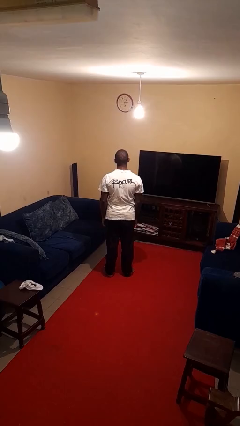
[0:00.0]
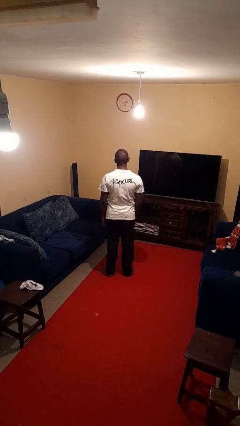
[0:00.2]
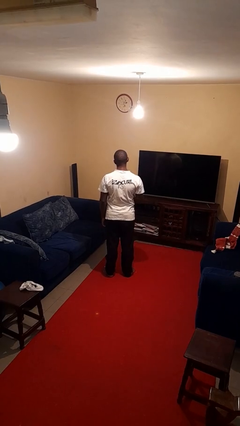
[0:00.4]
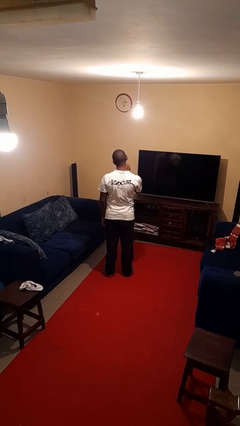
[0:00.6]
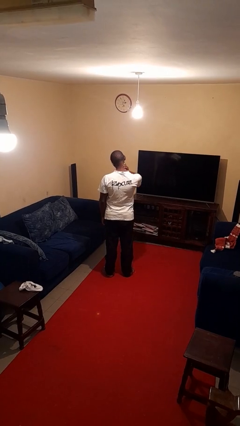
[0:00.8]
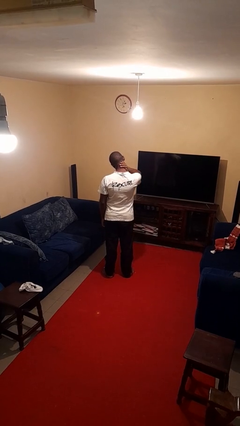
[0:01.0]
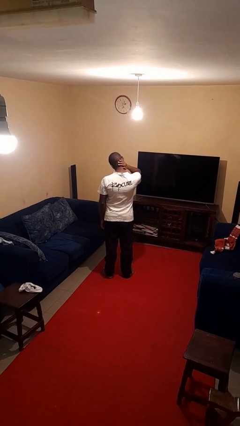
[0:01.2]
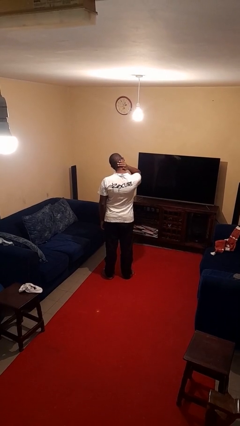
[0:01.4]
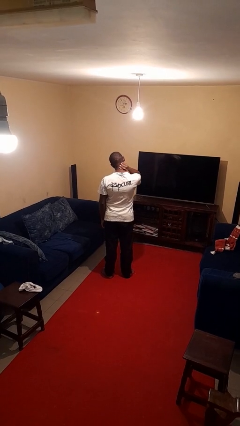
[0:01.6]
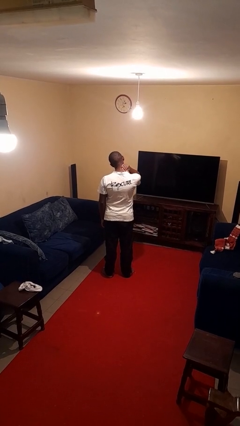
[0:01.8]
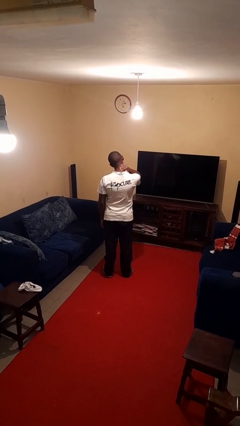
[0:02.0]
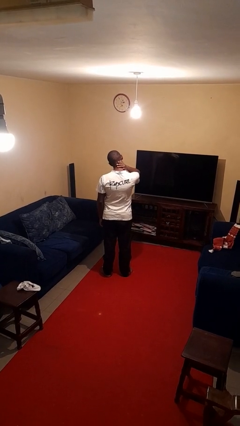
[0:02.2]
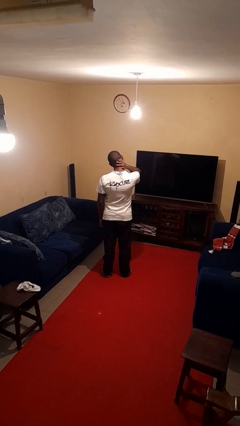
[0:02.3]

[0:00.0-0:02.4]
person rubs neck

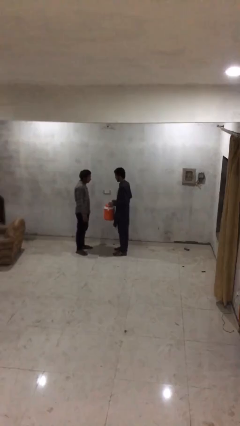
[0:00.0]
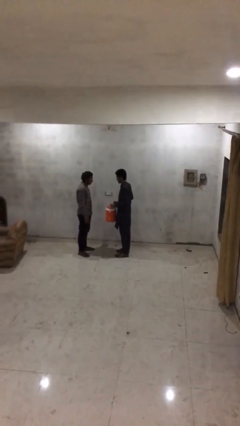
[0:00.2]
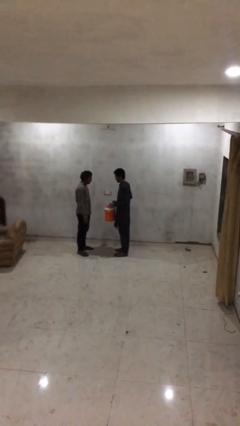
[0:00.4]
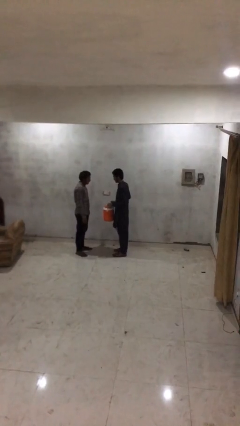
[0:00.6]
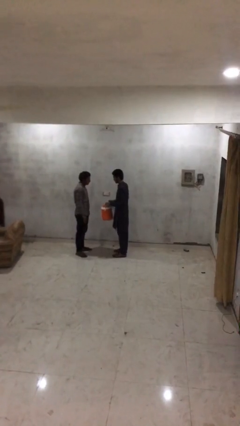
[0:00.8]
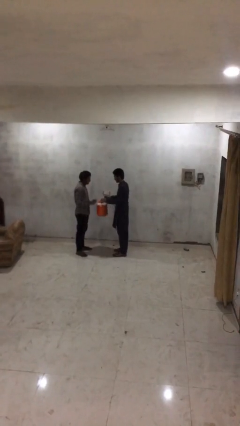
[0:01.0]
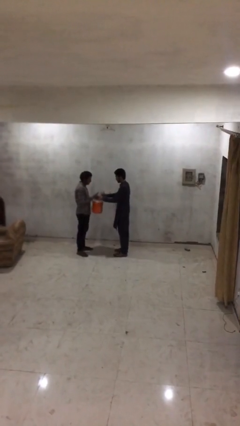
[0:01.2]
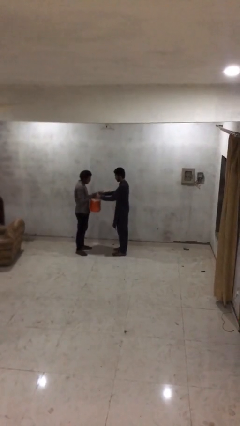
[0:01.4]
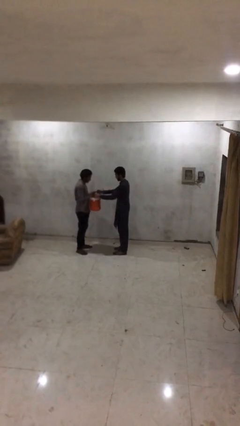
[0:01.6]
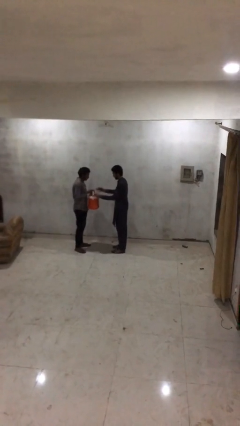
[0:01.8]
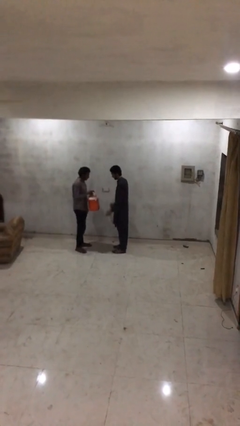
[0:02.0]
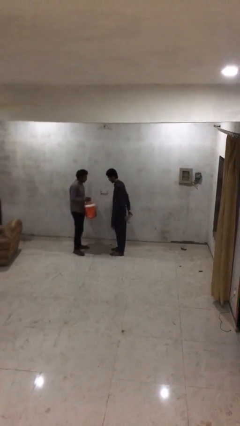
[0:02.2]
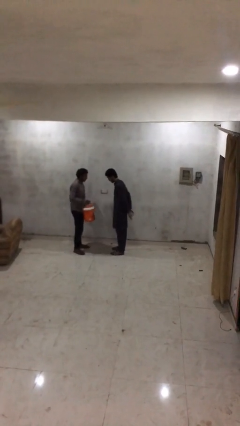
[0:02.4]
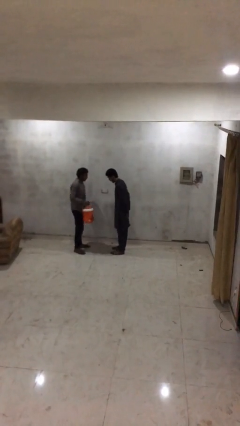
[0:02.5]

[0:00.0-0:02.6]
person transfers object to person

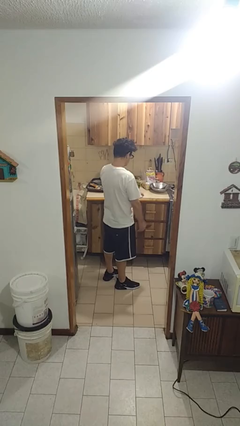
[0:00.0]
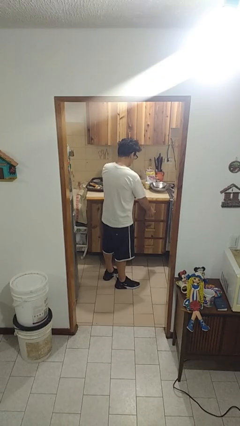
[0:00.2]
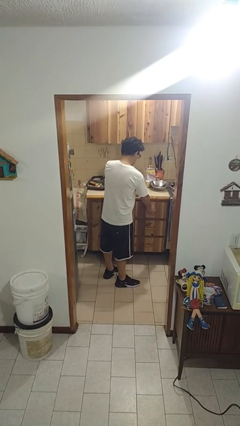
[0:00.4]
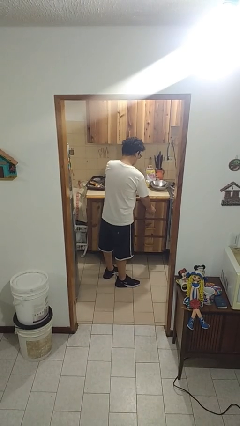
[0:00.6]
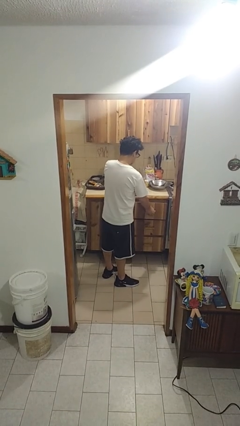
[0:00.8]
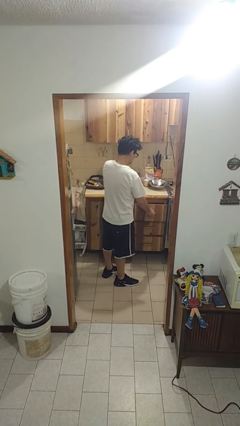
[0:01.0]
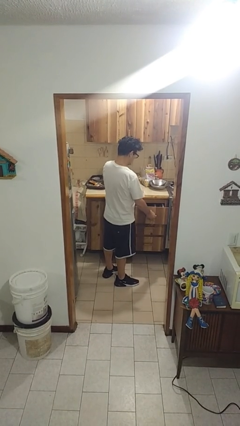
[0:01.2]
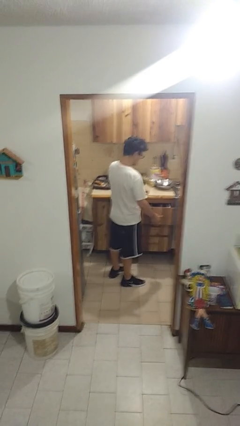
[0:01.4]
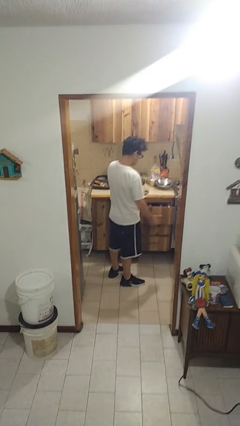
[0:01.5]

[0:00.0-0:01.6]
person opens kitchen drawer

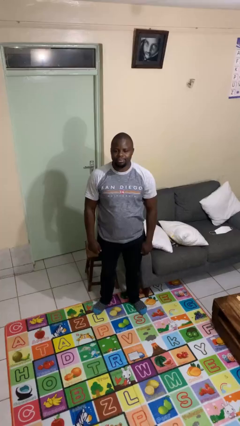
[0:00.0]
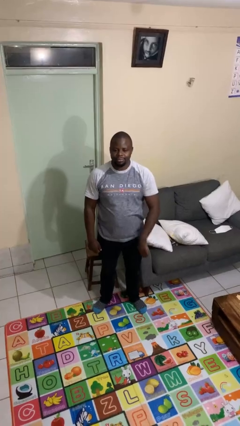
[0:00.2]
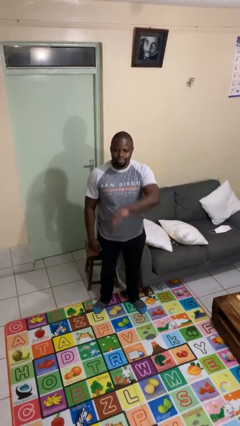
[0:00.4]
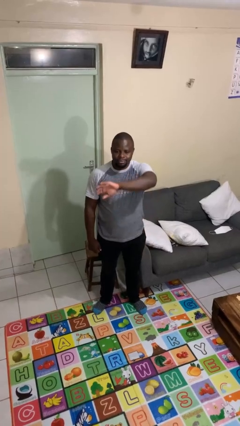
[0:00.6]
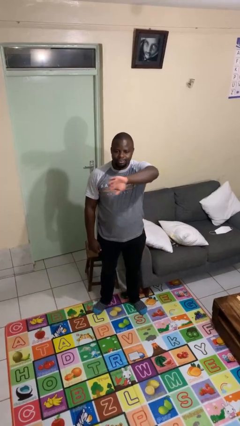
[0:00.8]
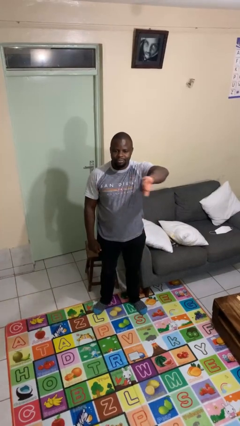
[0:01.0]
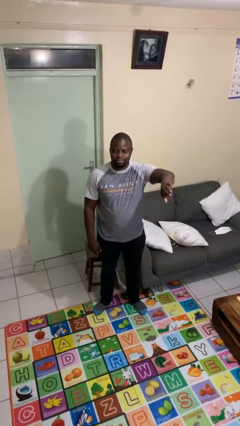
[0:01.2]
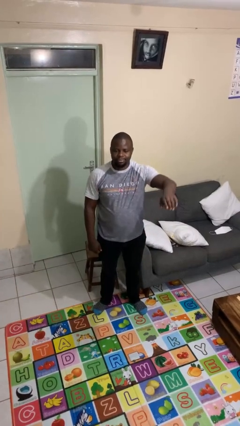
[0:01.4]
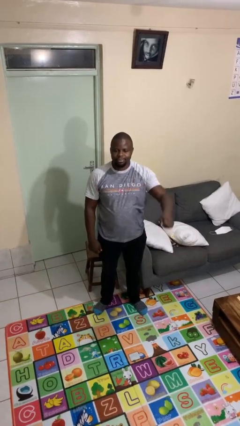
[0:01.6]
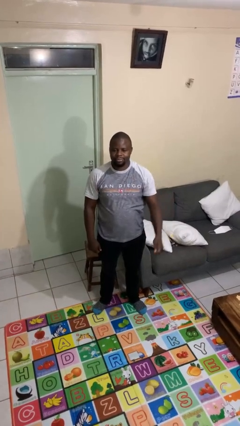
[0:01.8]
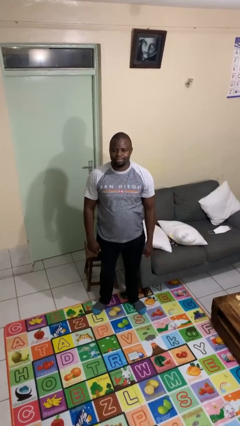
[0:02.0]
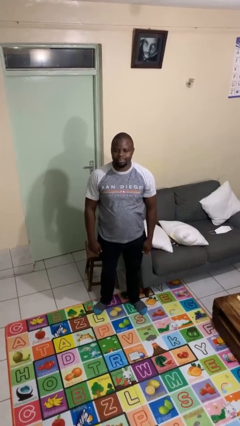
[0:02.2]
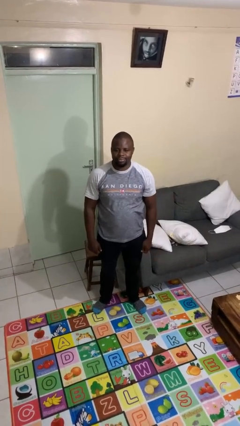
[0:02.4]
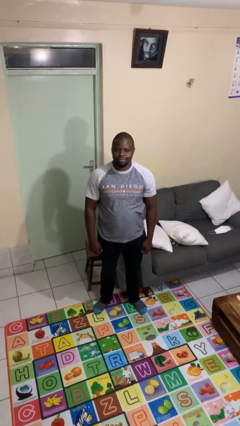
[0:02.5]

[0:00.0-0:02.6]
person gestures swipe left

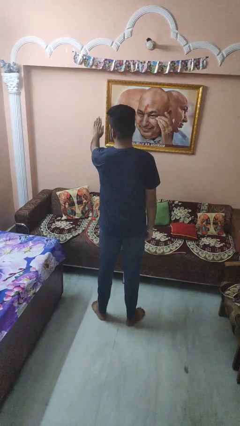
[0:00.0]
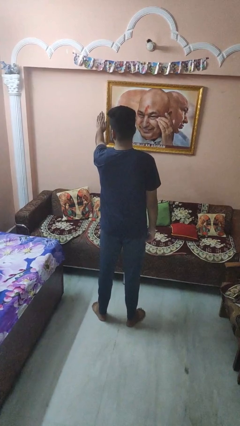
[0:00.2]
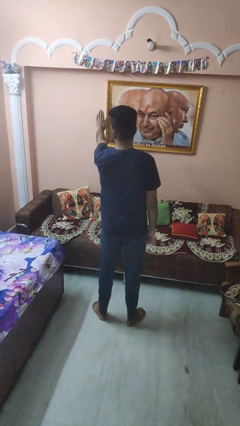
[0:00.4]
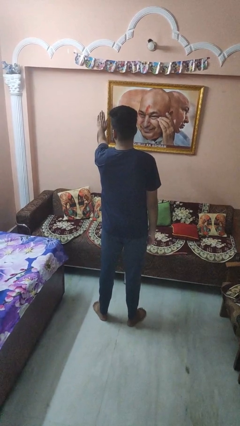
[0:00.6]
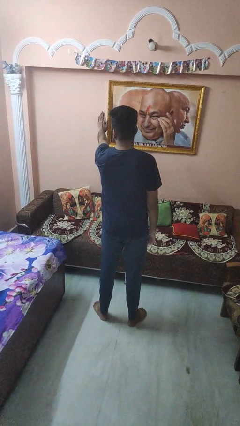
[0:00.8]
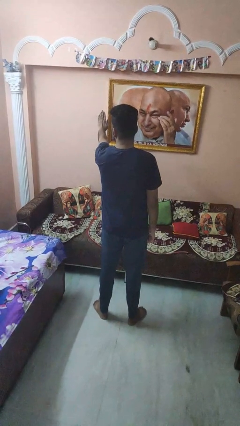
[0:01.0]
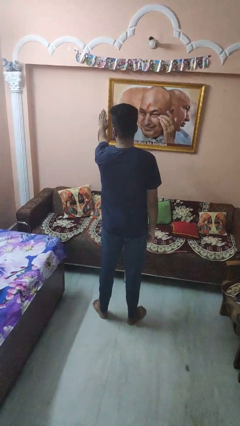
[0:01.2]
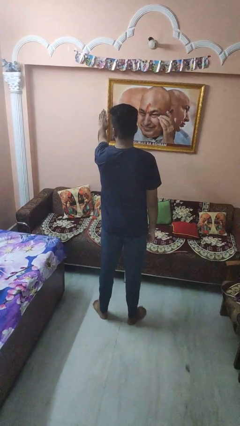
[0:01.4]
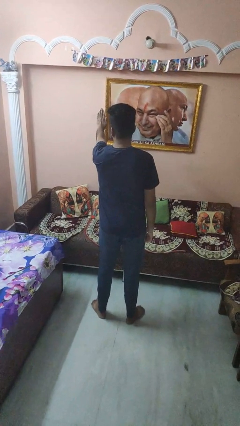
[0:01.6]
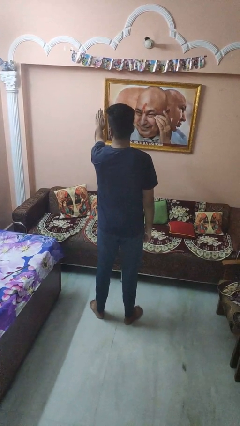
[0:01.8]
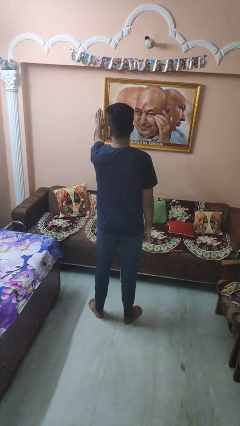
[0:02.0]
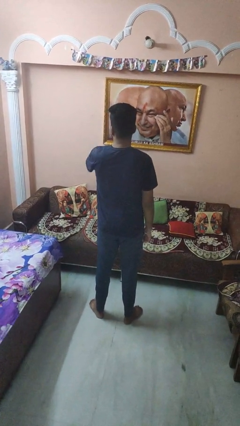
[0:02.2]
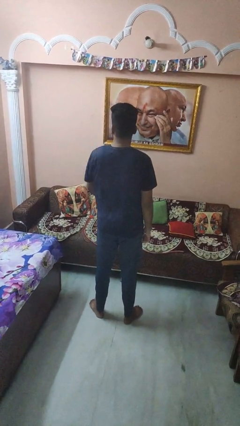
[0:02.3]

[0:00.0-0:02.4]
person gestures stop

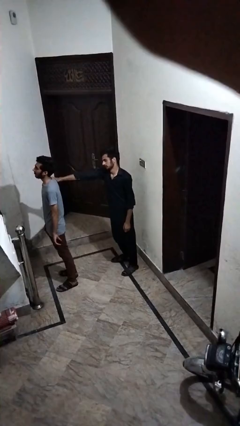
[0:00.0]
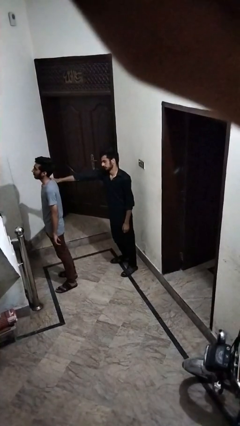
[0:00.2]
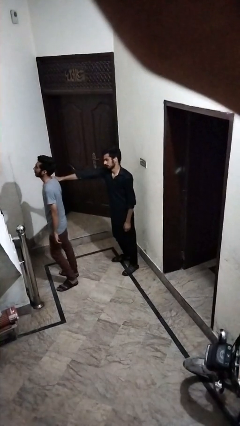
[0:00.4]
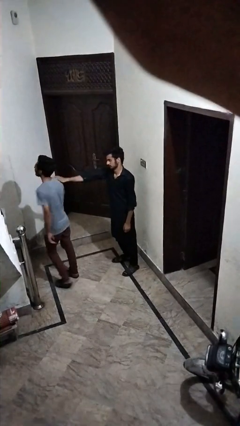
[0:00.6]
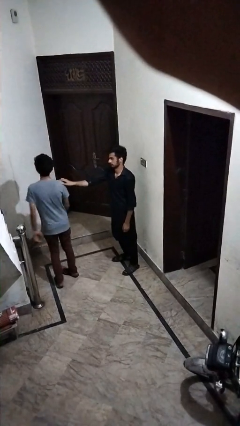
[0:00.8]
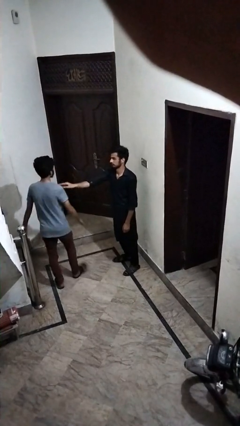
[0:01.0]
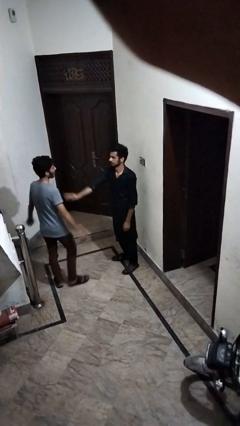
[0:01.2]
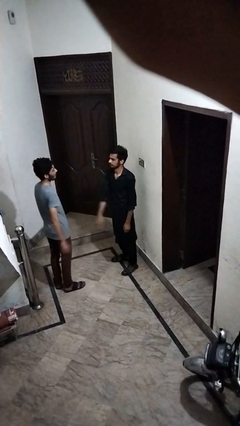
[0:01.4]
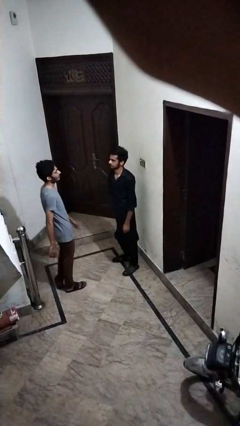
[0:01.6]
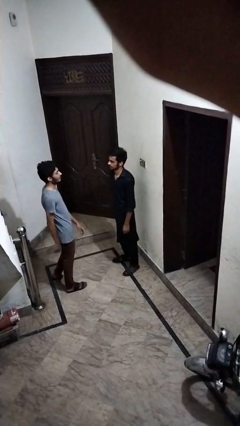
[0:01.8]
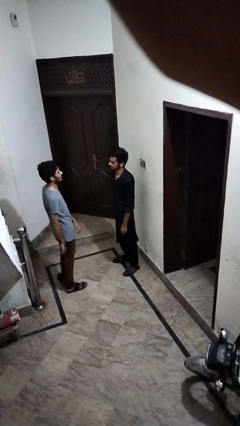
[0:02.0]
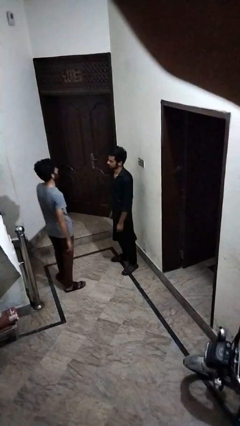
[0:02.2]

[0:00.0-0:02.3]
person spins person around

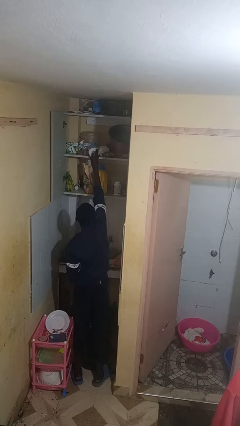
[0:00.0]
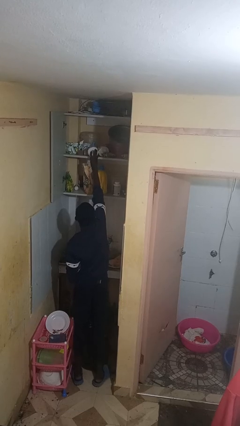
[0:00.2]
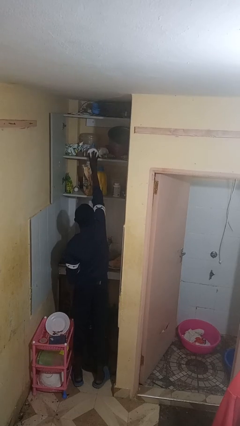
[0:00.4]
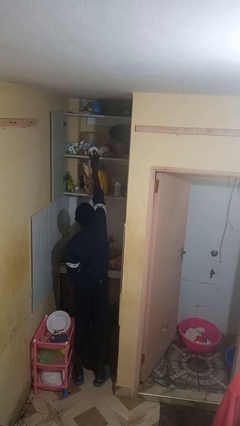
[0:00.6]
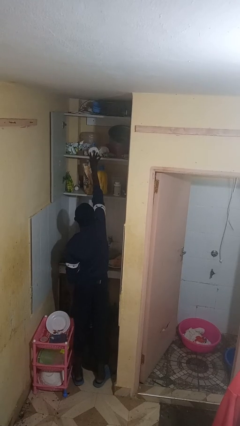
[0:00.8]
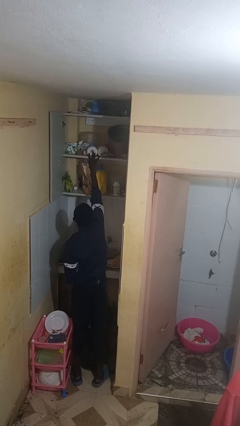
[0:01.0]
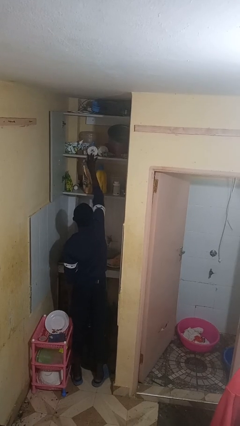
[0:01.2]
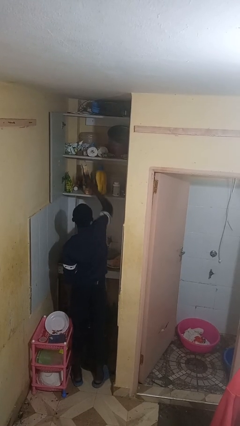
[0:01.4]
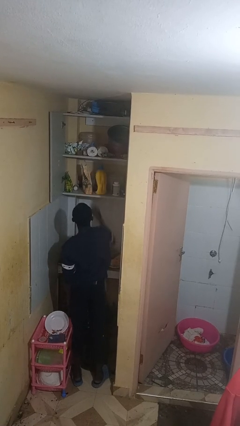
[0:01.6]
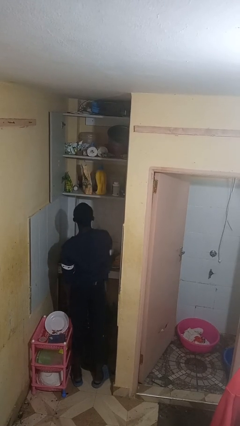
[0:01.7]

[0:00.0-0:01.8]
person puts object in cabinet

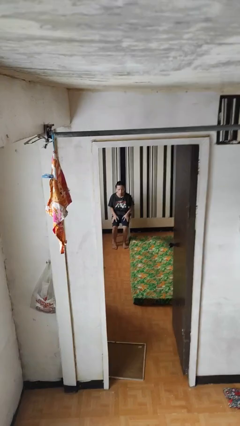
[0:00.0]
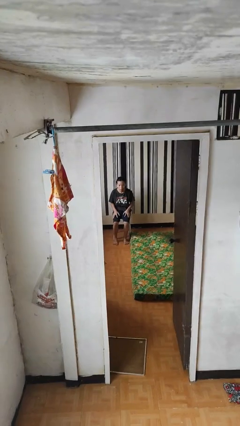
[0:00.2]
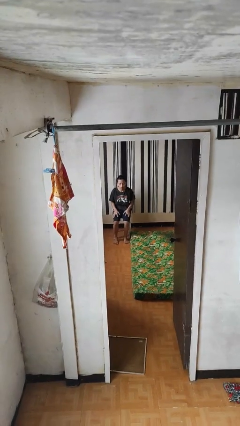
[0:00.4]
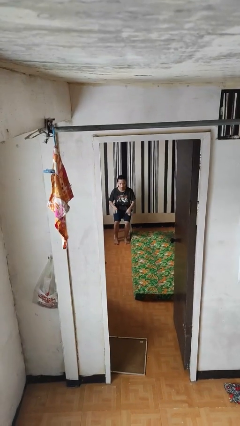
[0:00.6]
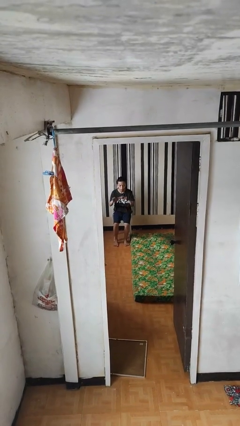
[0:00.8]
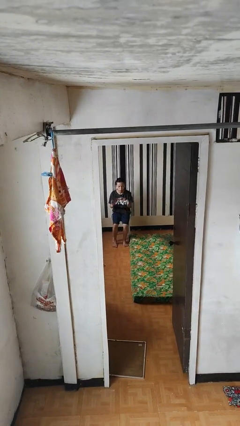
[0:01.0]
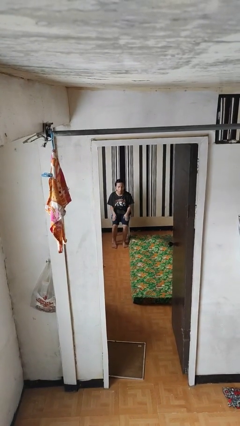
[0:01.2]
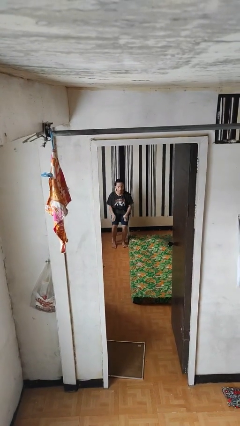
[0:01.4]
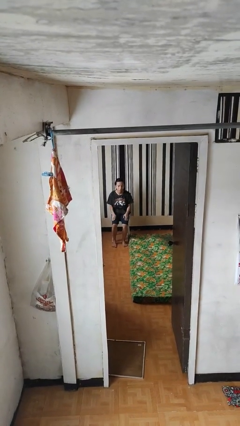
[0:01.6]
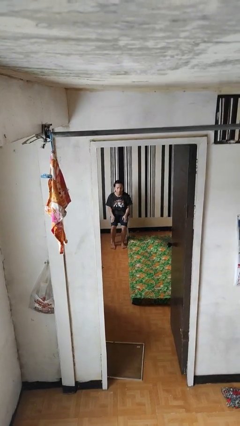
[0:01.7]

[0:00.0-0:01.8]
person slaps hands on thighs
